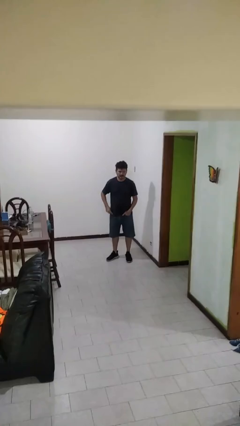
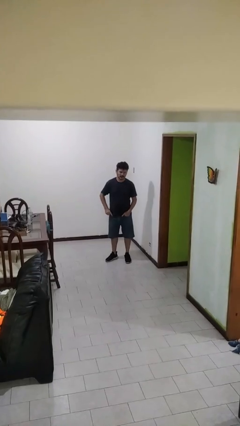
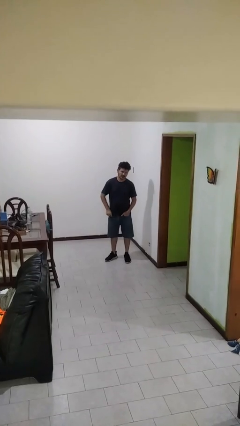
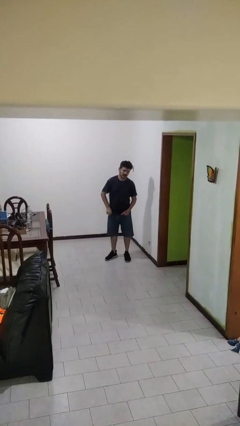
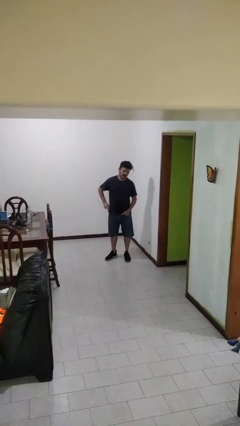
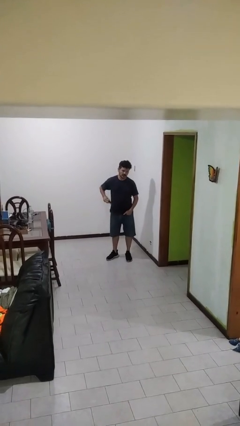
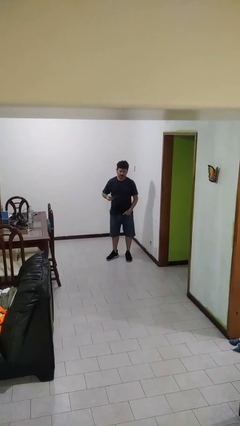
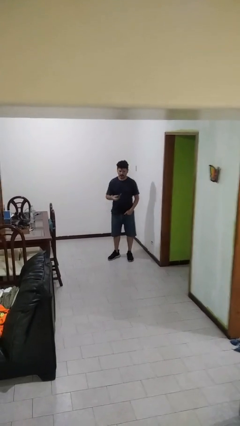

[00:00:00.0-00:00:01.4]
person takes phone from pocket

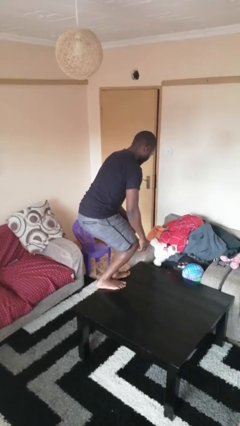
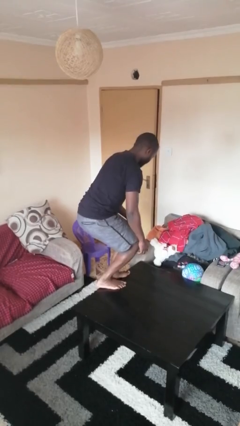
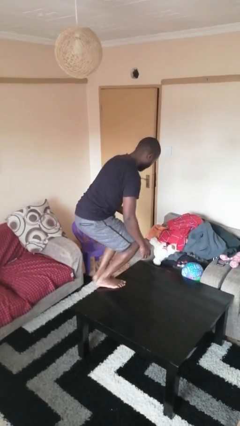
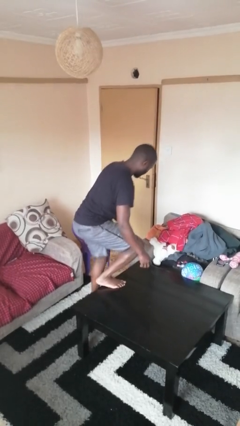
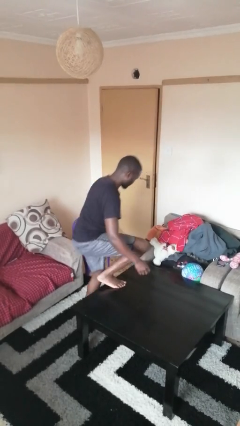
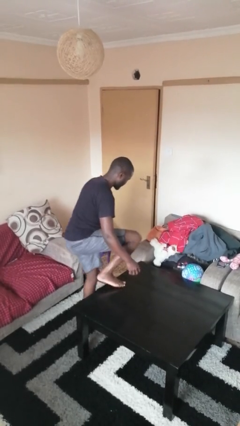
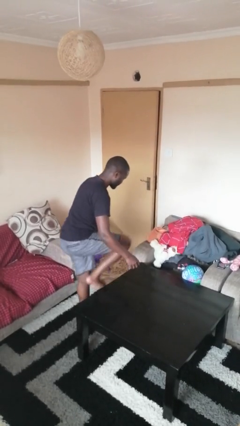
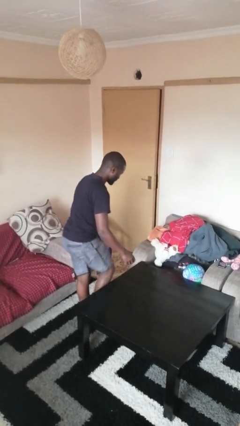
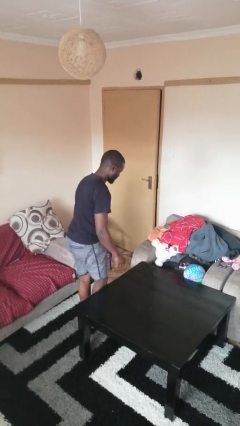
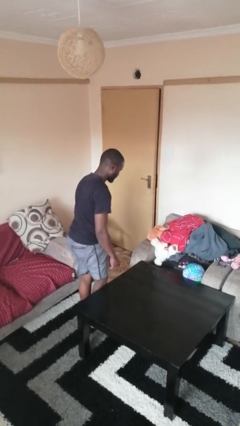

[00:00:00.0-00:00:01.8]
person climbs off table

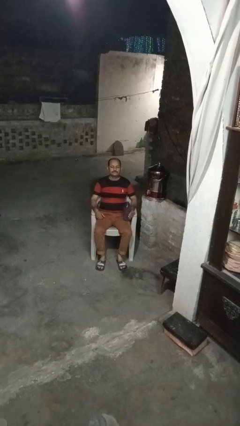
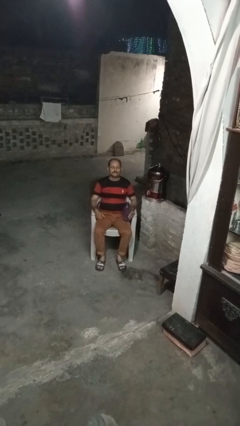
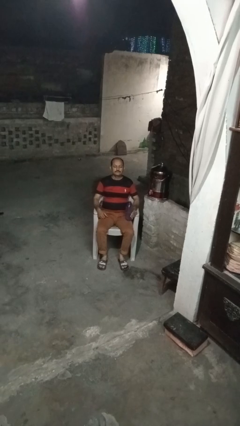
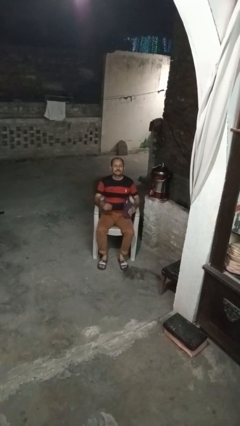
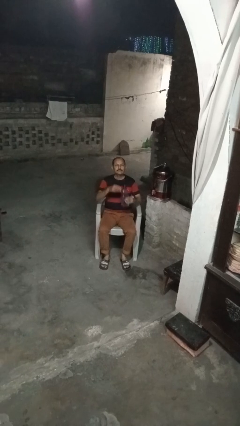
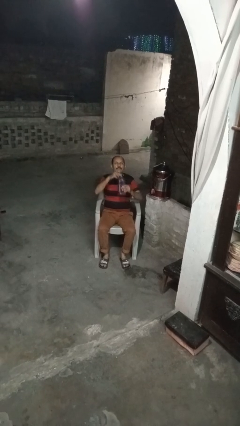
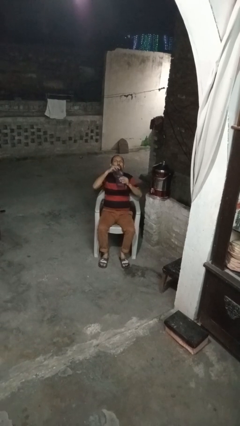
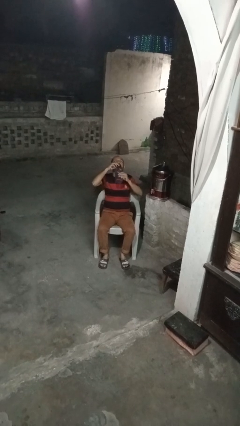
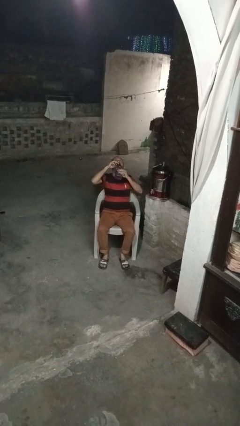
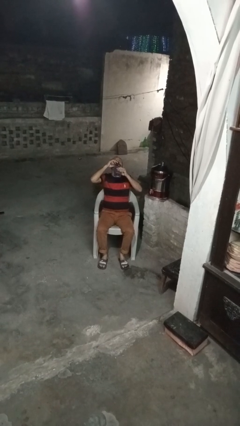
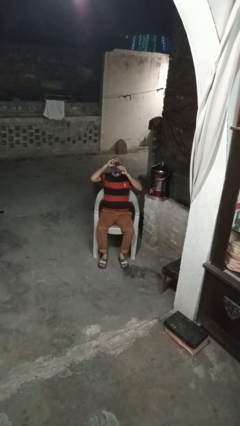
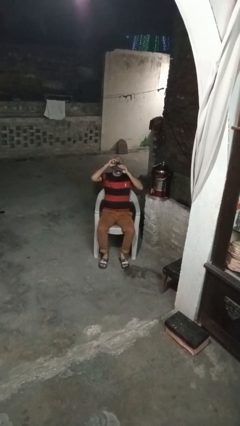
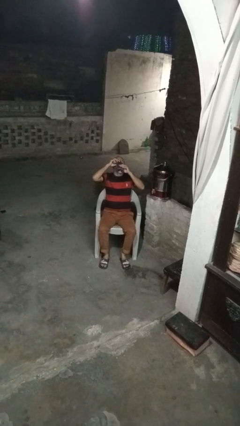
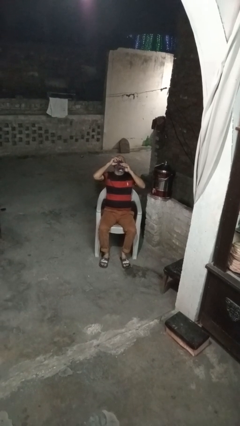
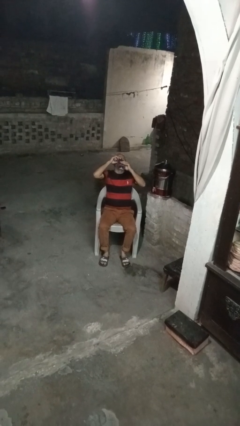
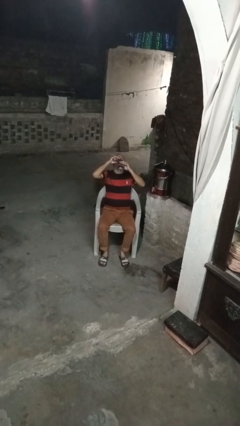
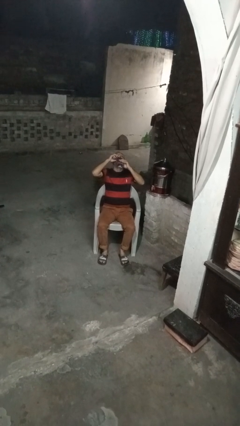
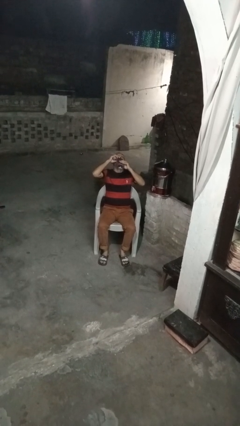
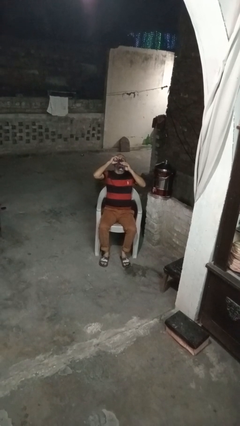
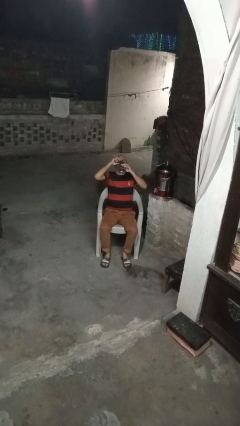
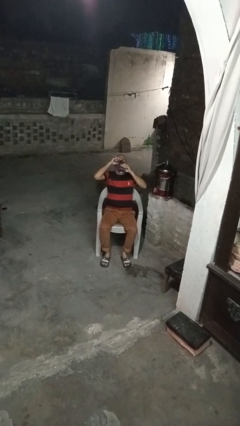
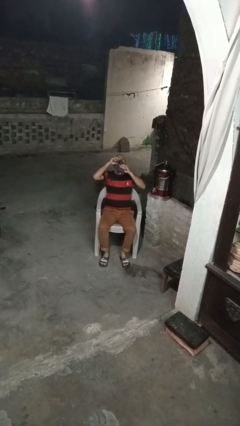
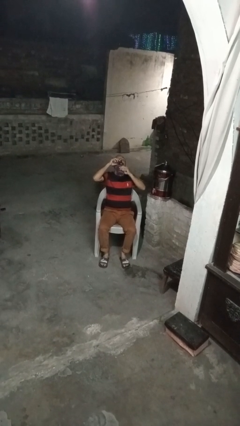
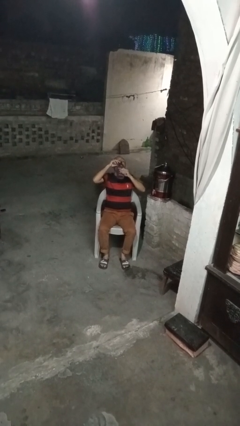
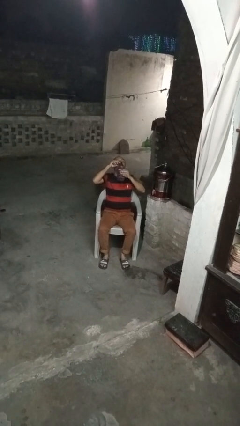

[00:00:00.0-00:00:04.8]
person drinks from bottle

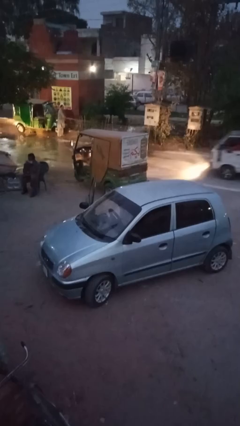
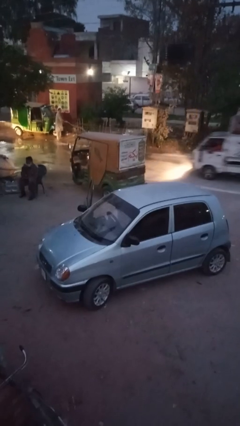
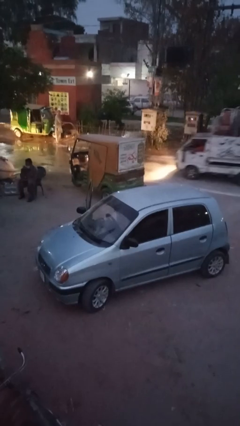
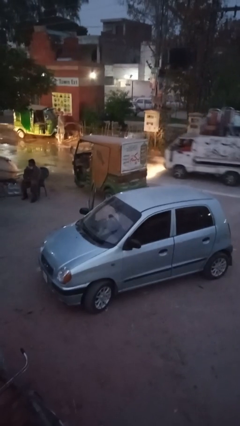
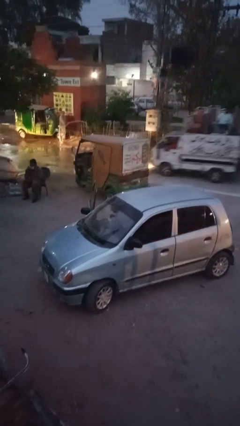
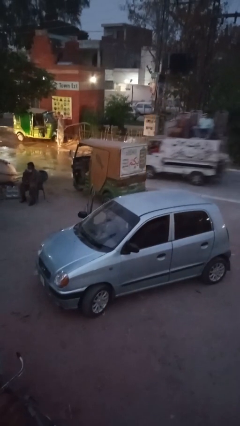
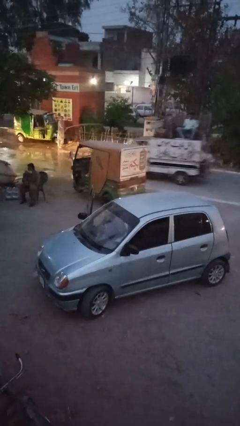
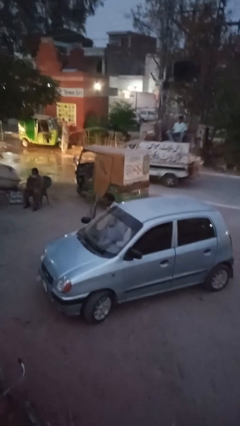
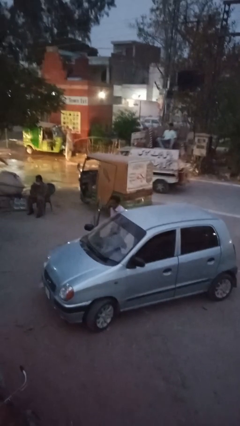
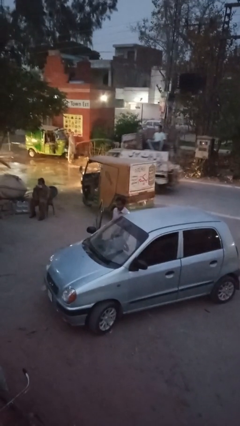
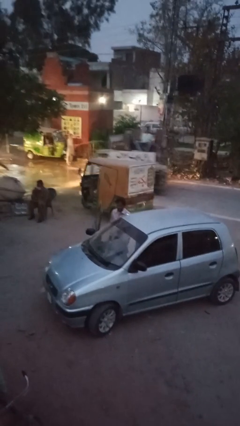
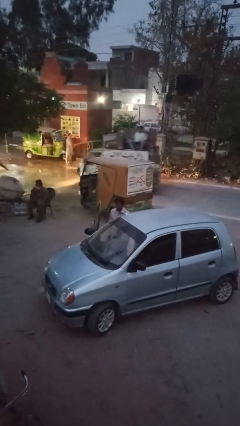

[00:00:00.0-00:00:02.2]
person exits car

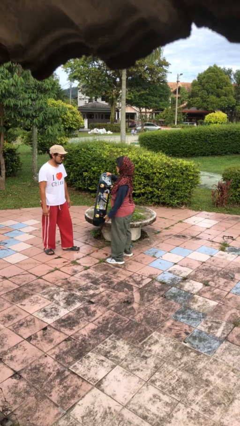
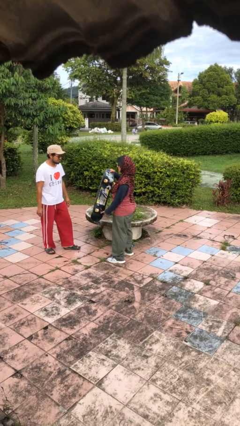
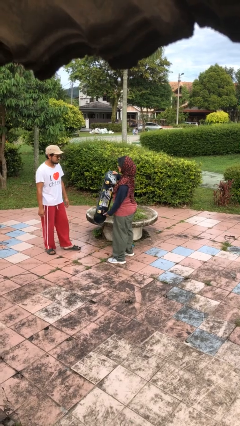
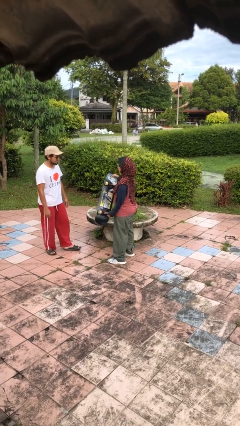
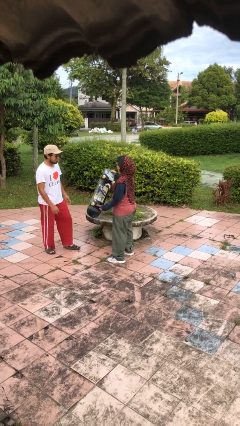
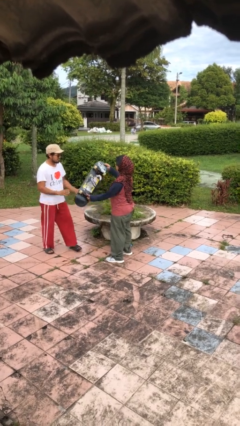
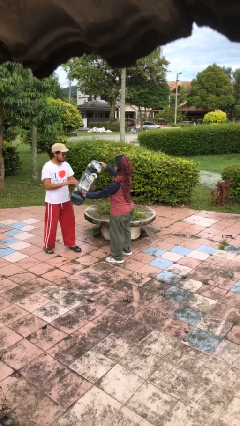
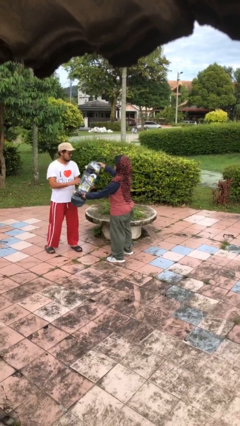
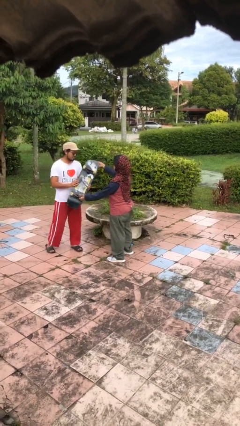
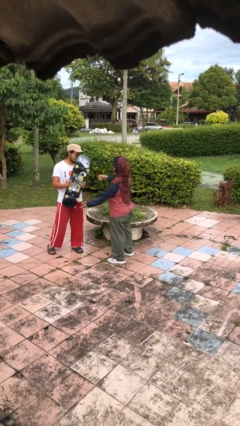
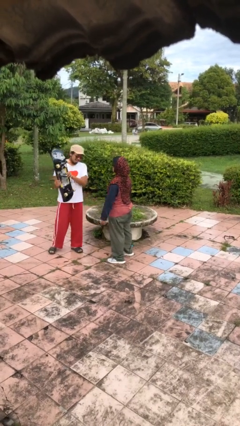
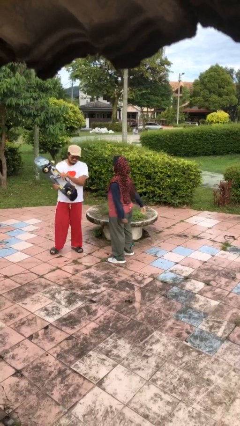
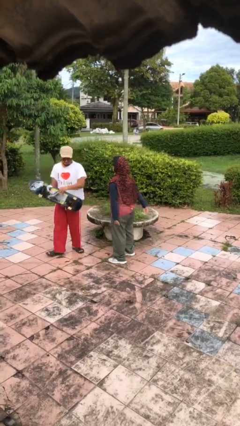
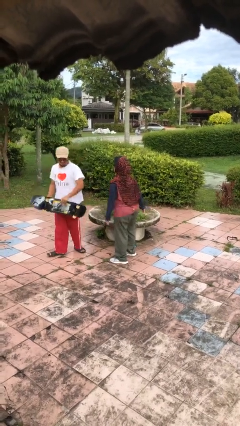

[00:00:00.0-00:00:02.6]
person transfers object to person

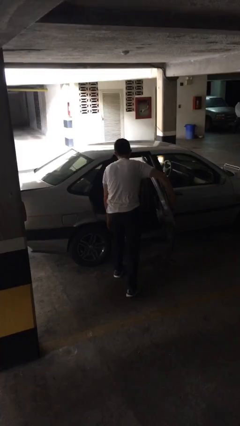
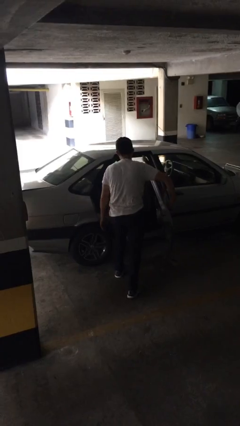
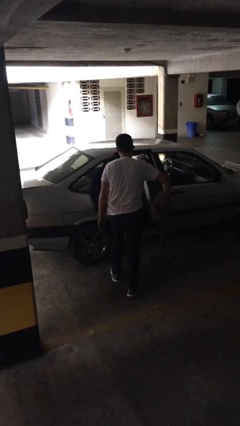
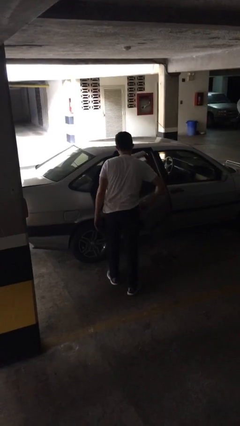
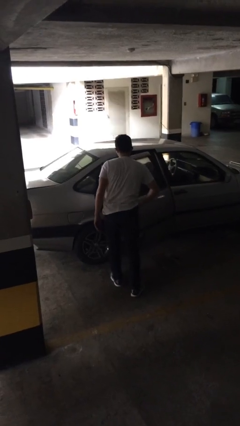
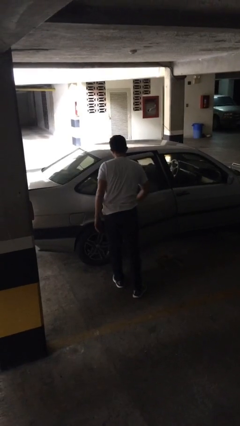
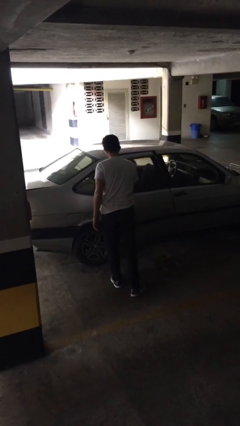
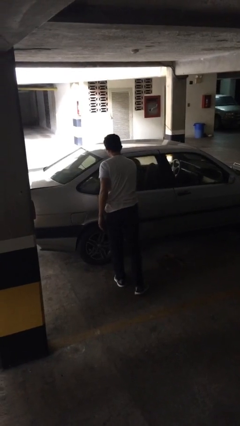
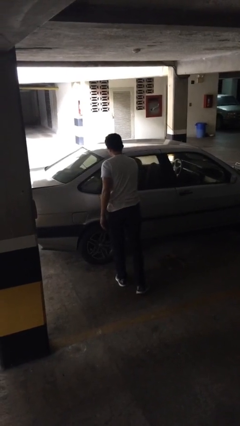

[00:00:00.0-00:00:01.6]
person closes car door

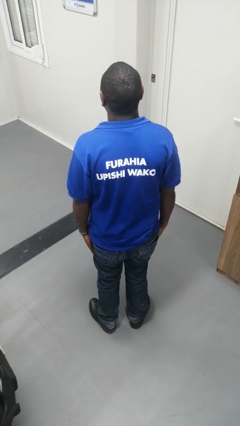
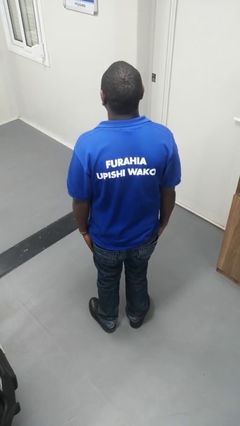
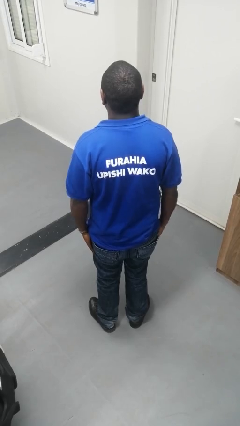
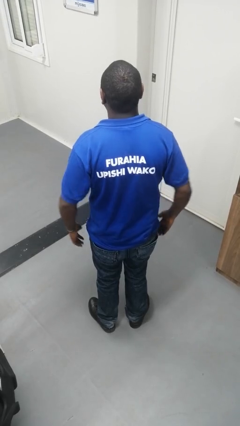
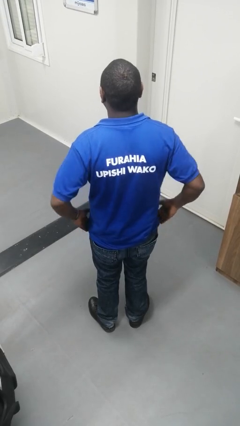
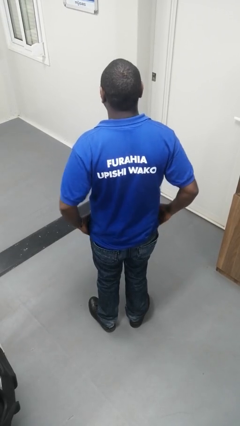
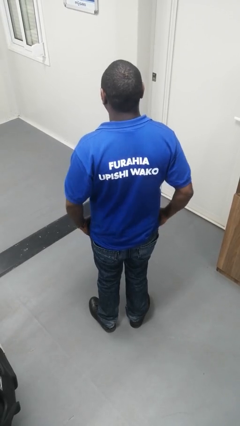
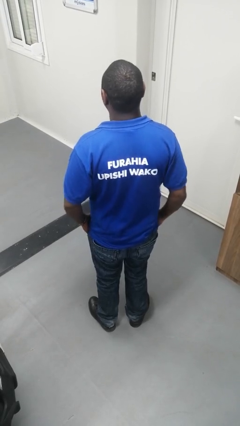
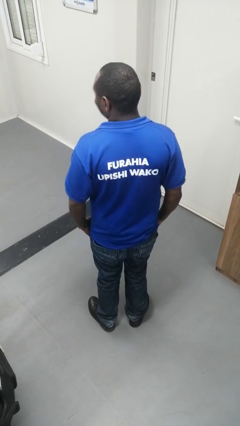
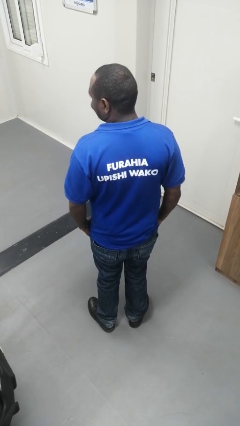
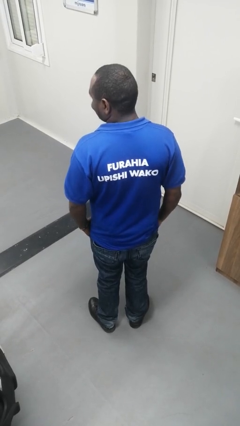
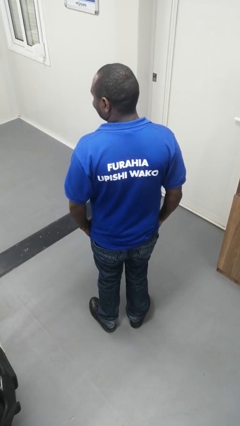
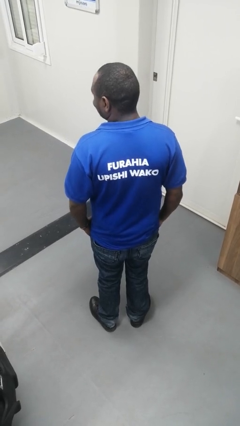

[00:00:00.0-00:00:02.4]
person puts hands in back pockets
